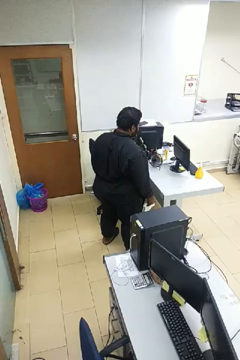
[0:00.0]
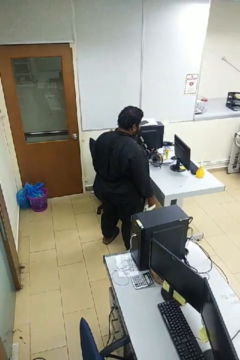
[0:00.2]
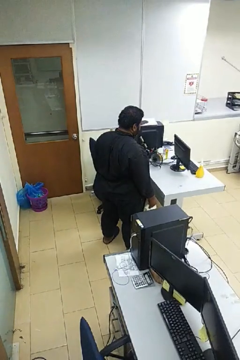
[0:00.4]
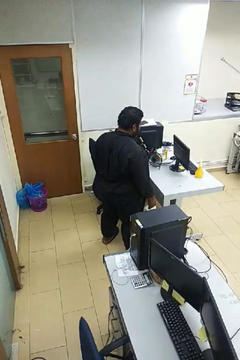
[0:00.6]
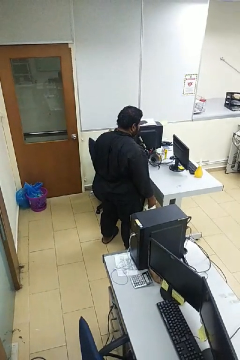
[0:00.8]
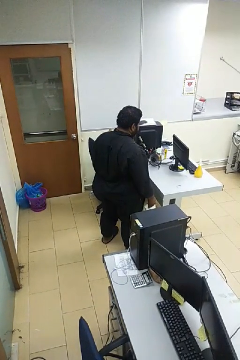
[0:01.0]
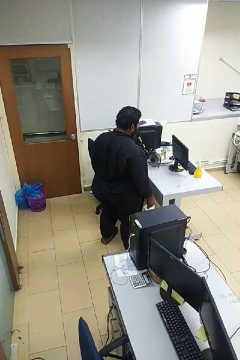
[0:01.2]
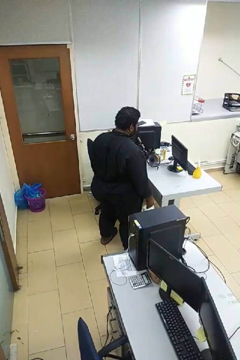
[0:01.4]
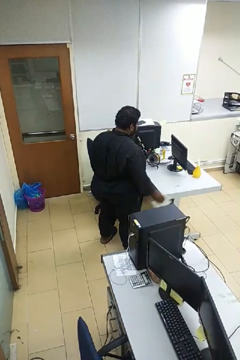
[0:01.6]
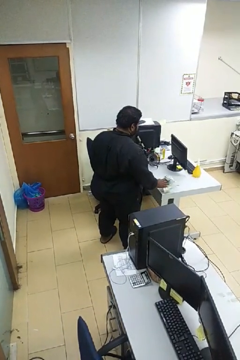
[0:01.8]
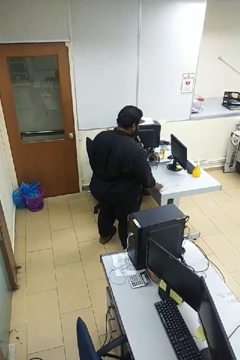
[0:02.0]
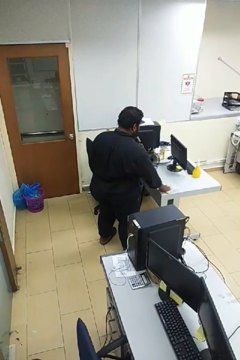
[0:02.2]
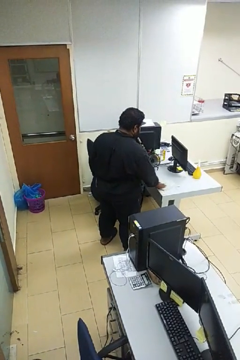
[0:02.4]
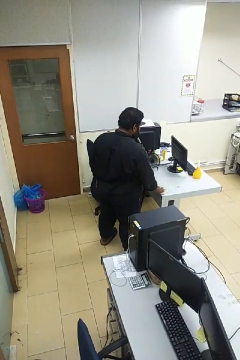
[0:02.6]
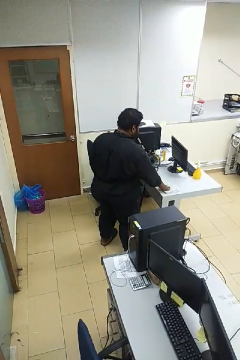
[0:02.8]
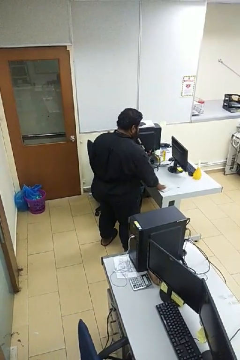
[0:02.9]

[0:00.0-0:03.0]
person cleans table with rag

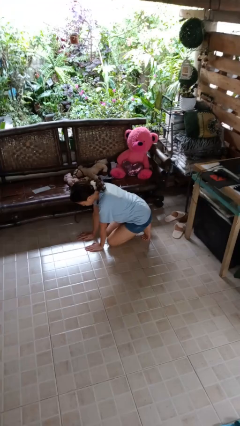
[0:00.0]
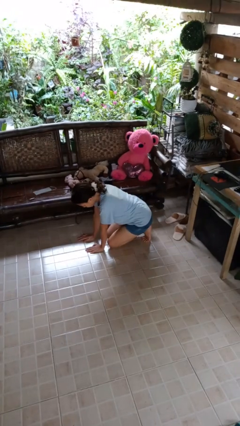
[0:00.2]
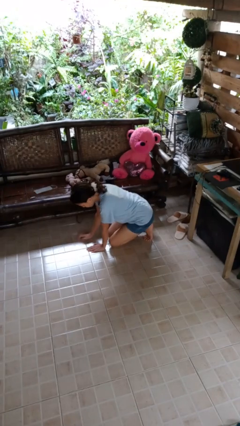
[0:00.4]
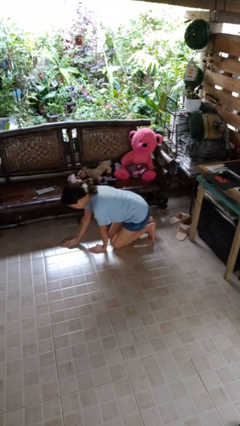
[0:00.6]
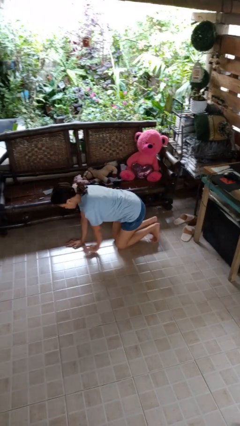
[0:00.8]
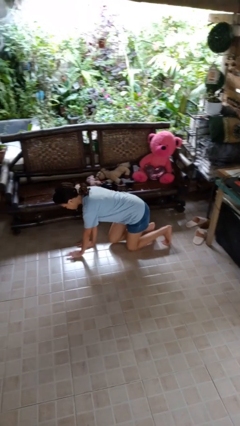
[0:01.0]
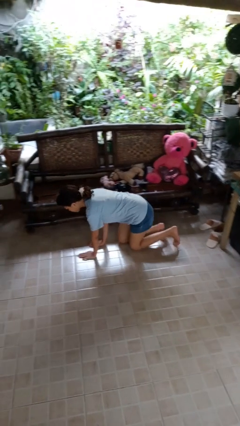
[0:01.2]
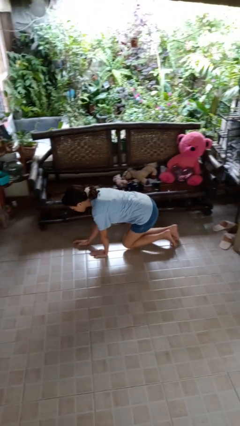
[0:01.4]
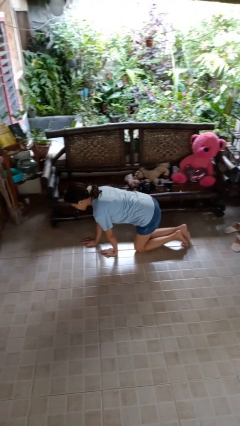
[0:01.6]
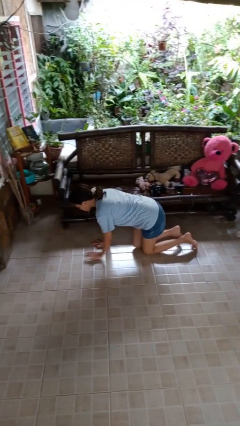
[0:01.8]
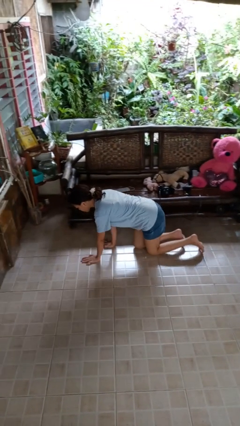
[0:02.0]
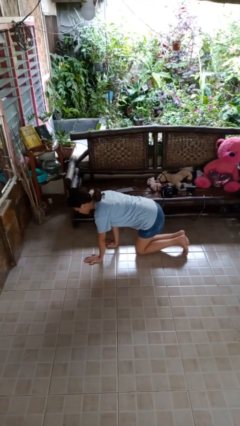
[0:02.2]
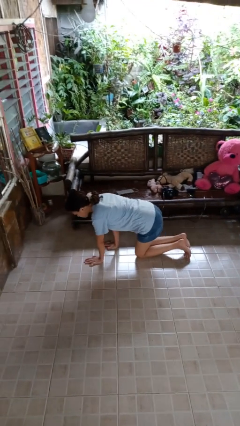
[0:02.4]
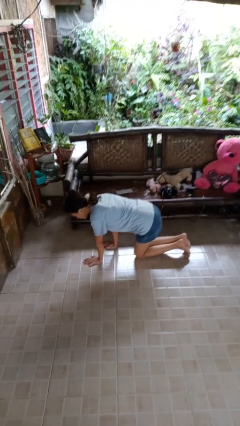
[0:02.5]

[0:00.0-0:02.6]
person crawls

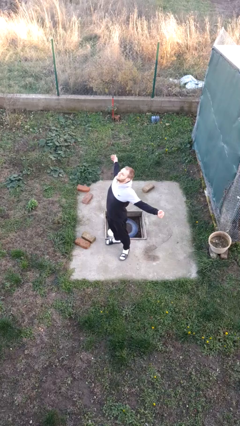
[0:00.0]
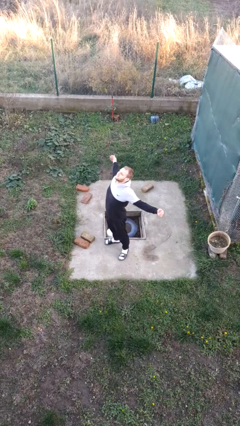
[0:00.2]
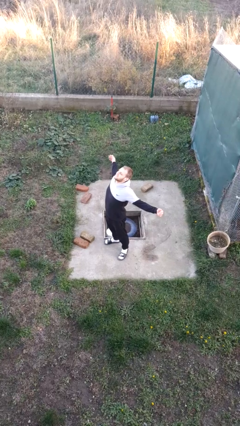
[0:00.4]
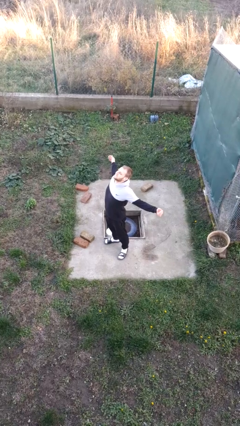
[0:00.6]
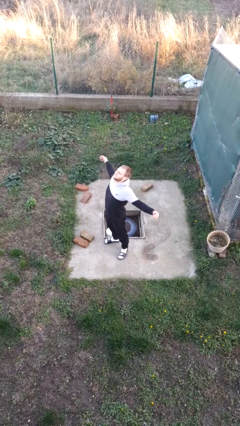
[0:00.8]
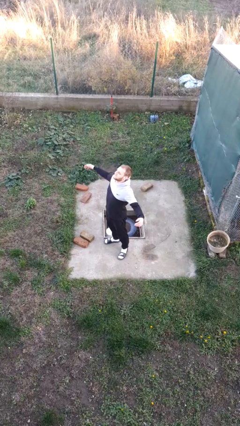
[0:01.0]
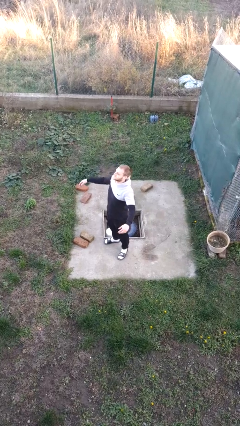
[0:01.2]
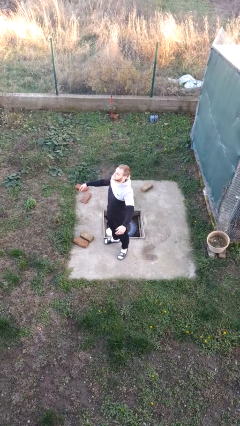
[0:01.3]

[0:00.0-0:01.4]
person stretches arms to side

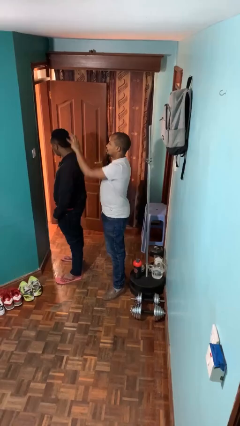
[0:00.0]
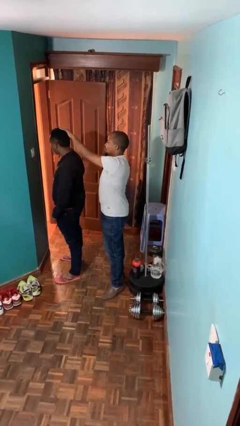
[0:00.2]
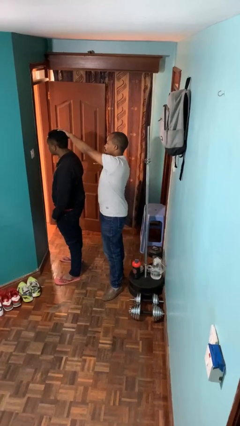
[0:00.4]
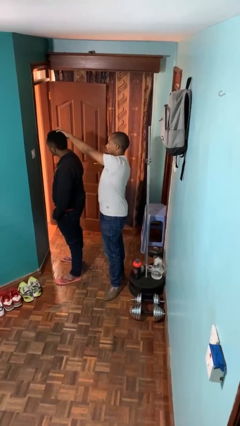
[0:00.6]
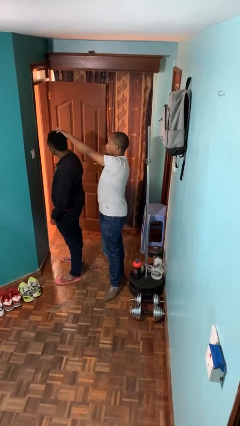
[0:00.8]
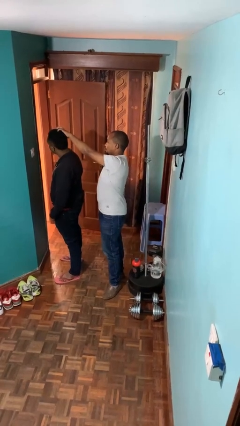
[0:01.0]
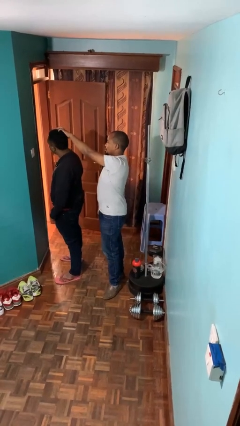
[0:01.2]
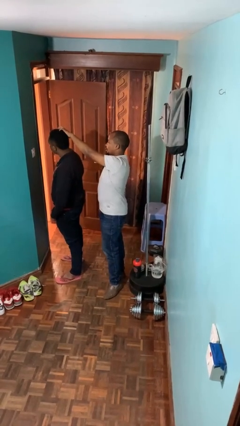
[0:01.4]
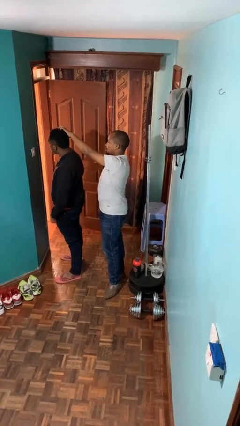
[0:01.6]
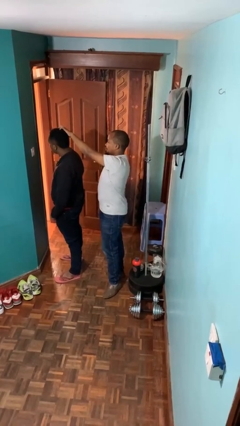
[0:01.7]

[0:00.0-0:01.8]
person grabs person by hair

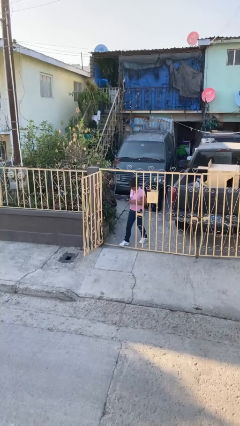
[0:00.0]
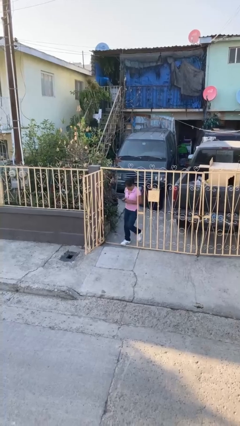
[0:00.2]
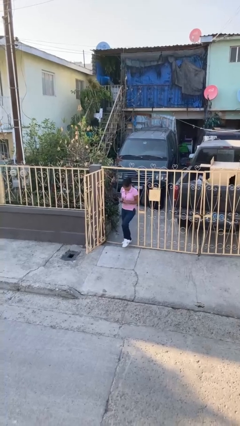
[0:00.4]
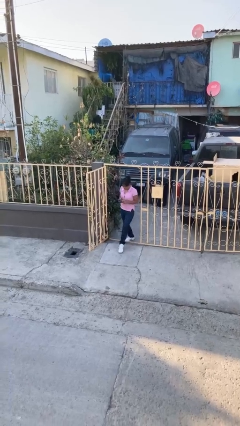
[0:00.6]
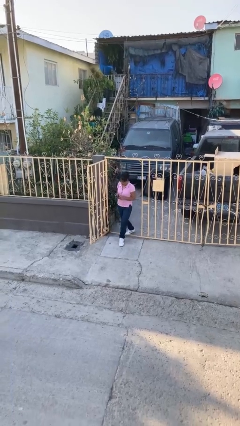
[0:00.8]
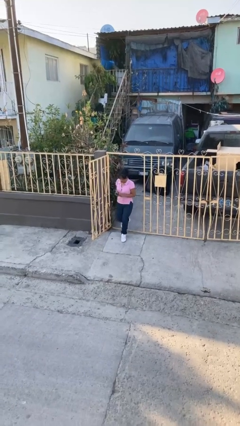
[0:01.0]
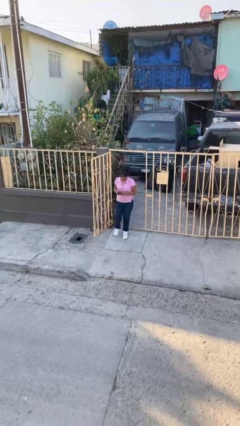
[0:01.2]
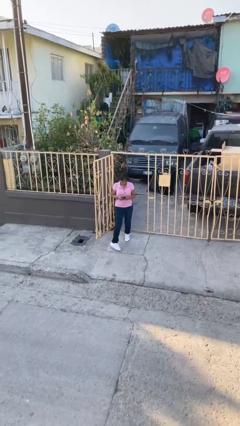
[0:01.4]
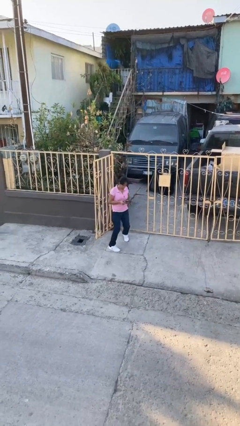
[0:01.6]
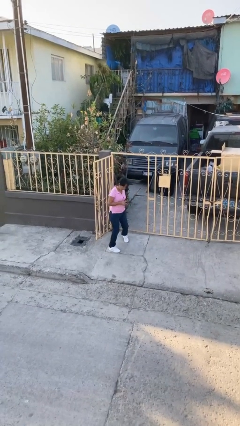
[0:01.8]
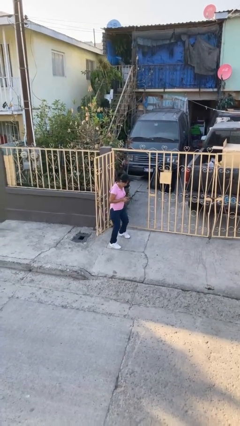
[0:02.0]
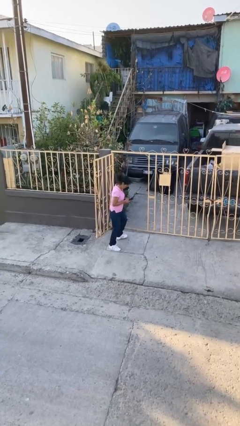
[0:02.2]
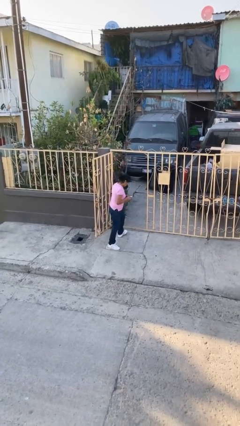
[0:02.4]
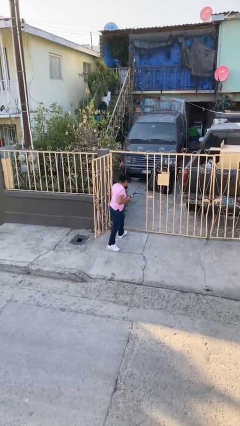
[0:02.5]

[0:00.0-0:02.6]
person enters scene through structure

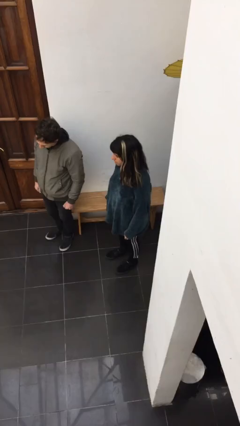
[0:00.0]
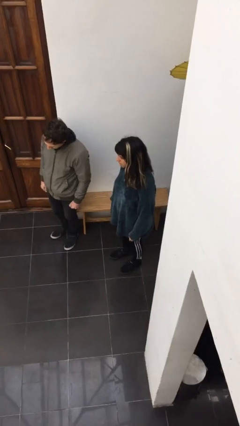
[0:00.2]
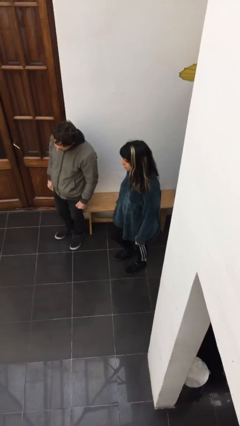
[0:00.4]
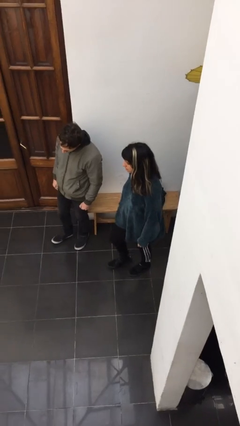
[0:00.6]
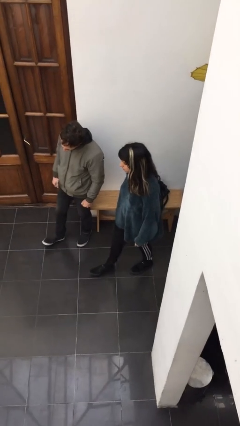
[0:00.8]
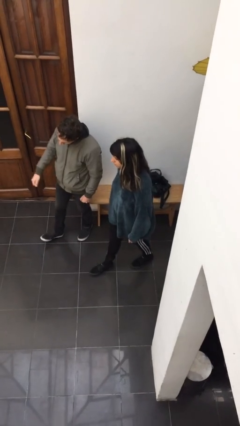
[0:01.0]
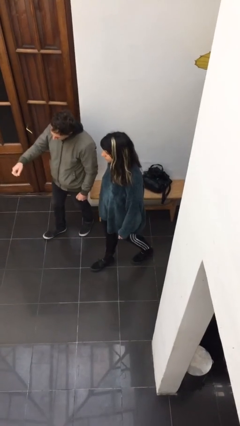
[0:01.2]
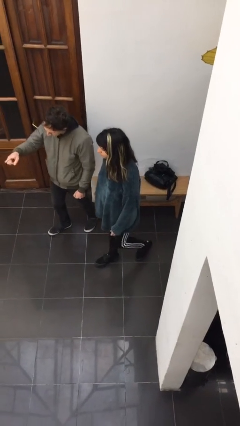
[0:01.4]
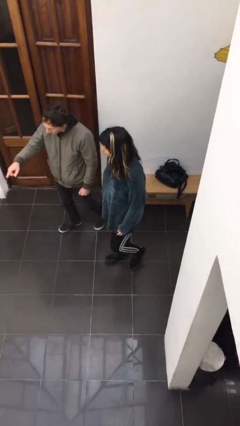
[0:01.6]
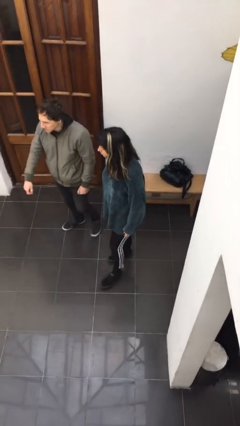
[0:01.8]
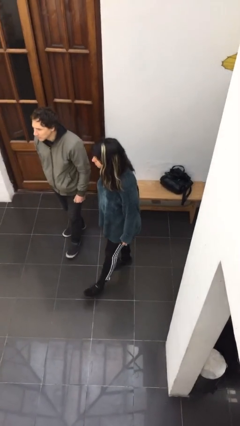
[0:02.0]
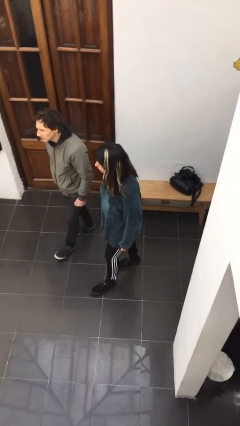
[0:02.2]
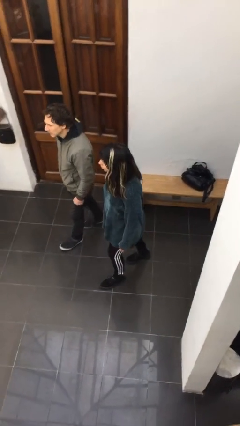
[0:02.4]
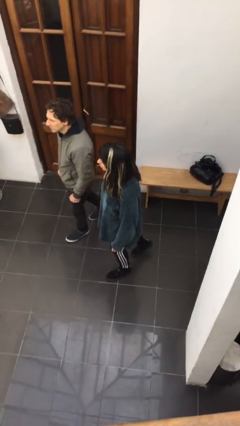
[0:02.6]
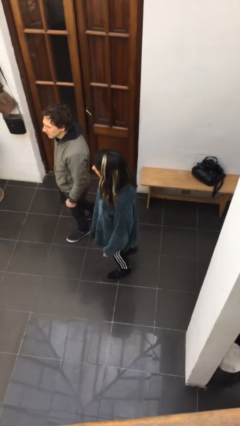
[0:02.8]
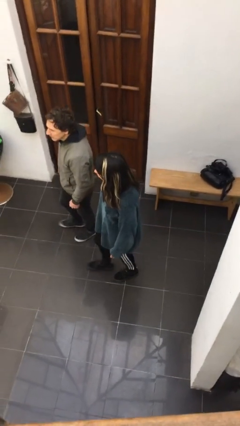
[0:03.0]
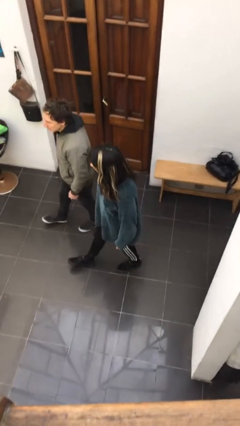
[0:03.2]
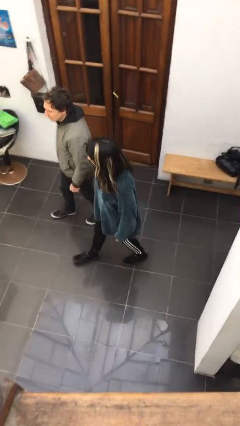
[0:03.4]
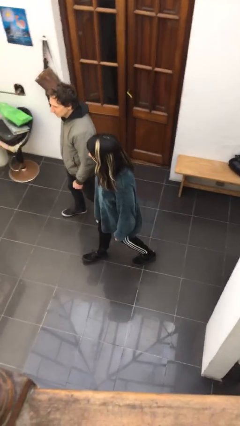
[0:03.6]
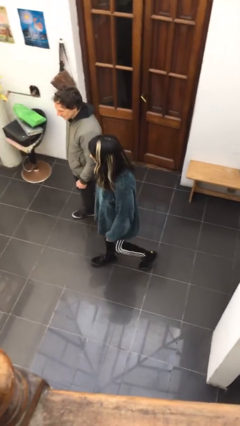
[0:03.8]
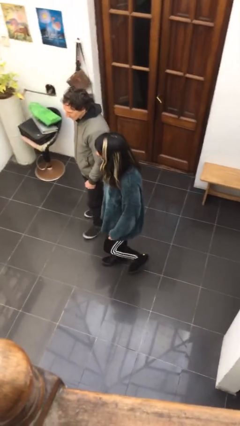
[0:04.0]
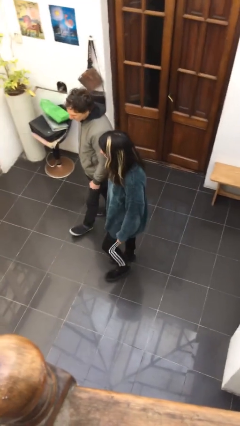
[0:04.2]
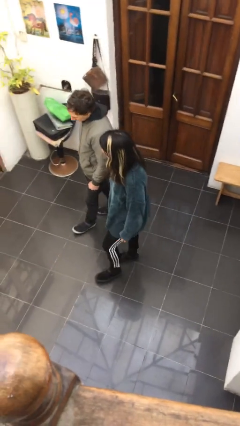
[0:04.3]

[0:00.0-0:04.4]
person talks to person

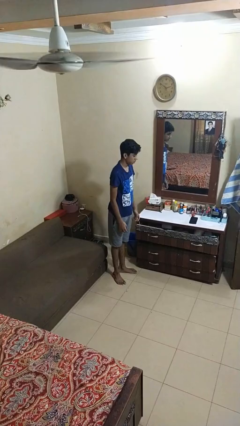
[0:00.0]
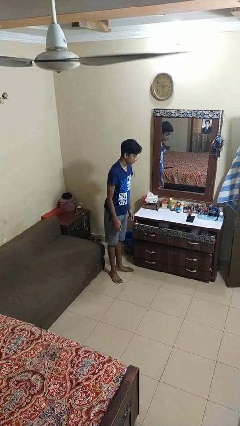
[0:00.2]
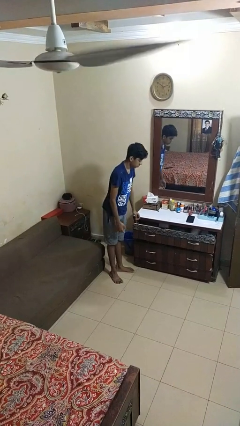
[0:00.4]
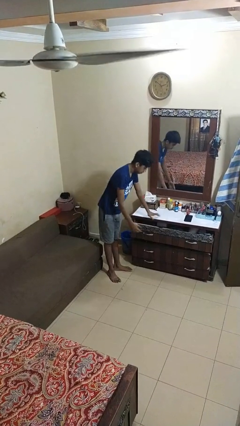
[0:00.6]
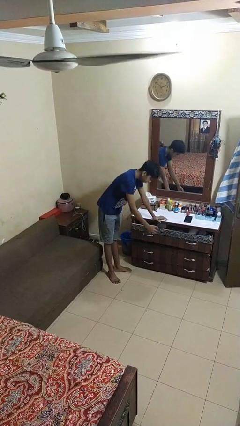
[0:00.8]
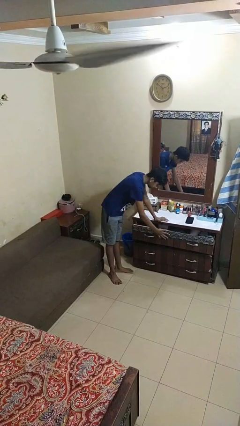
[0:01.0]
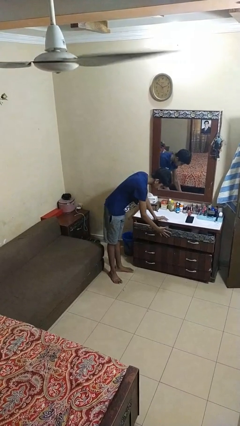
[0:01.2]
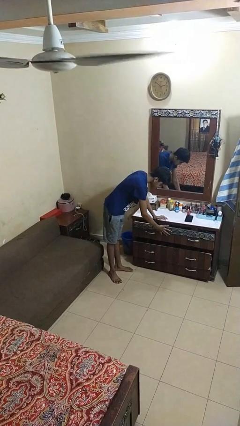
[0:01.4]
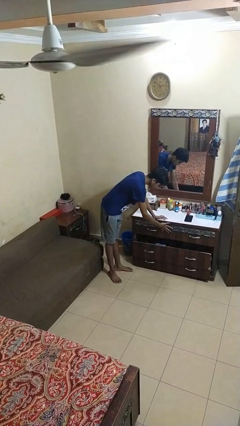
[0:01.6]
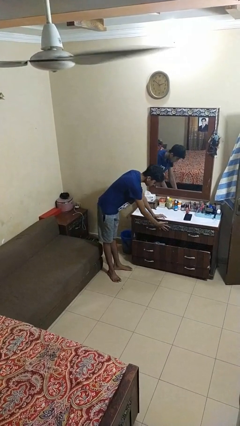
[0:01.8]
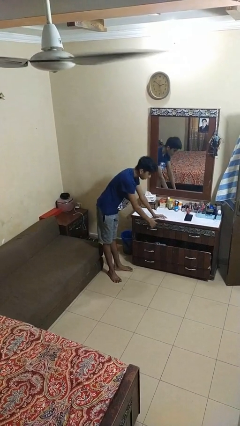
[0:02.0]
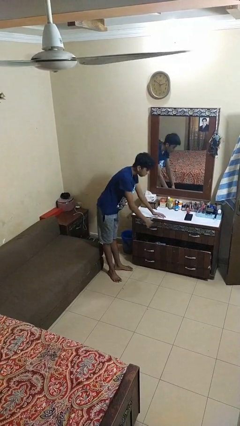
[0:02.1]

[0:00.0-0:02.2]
person closes dresser drawer
